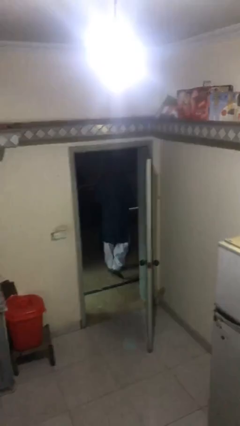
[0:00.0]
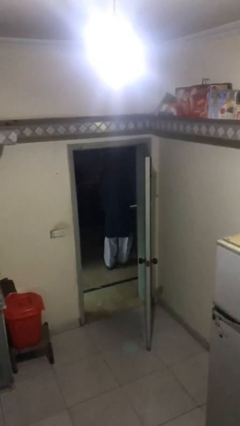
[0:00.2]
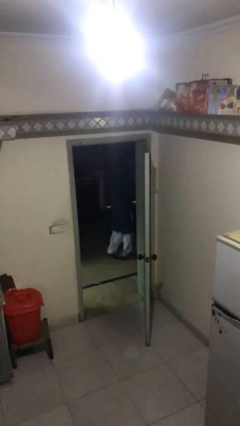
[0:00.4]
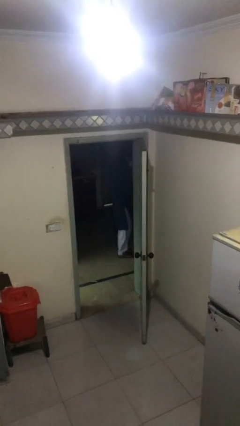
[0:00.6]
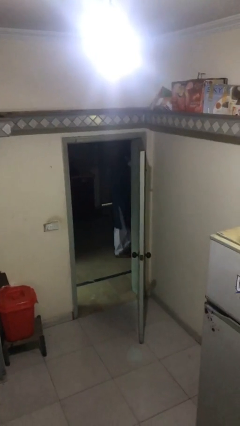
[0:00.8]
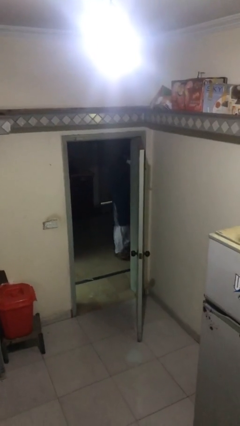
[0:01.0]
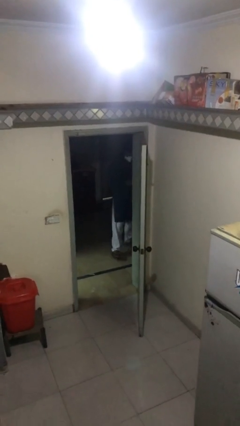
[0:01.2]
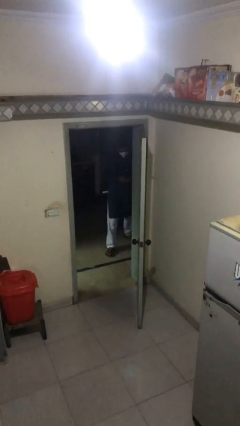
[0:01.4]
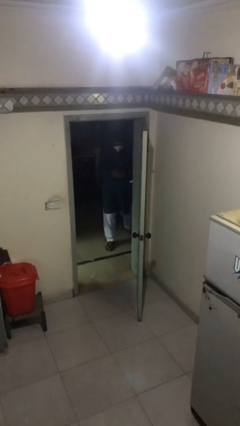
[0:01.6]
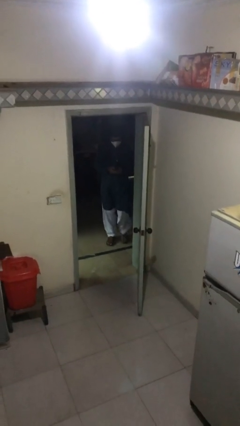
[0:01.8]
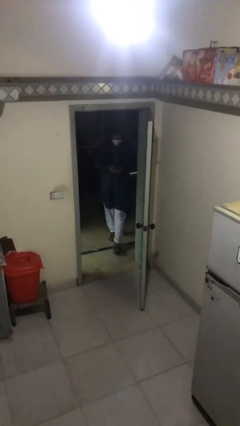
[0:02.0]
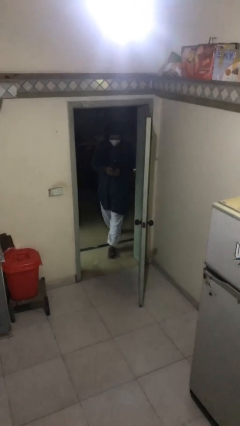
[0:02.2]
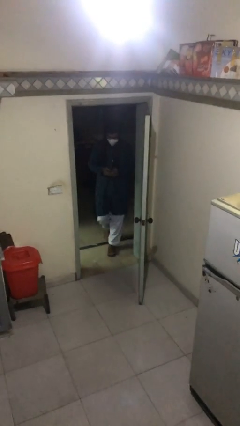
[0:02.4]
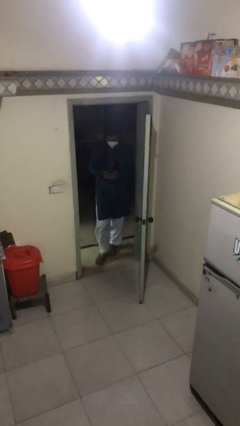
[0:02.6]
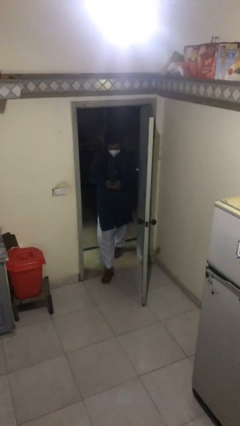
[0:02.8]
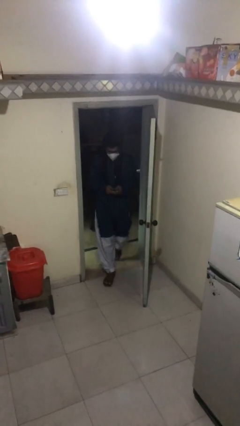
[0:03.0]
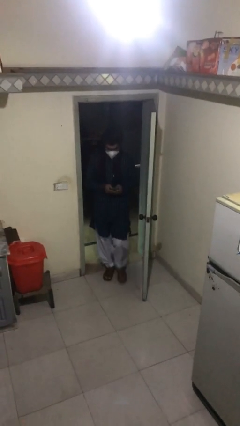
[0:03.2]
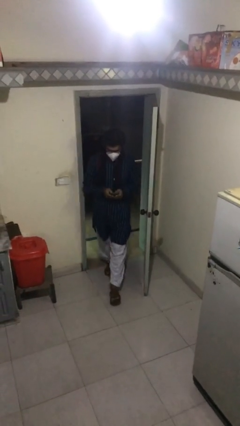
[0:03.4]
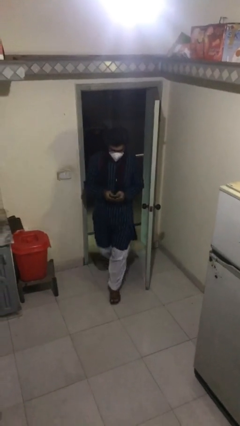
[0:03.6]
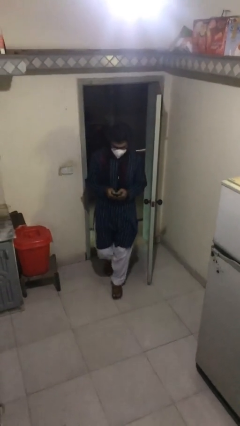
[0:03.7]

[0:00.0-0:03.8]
person enters scene through structure

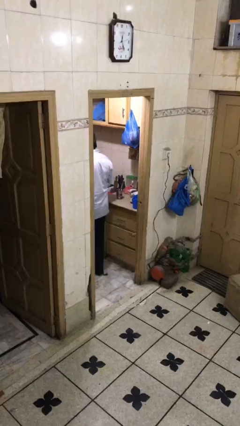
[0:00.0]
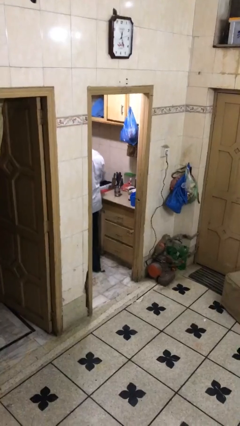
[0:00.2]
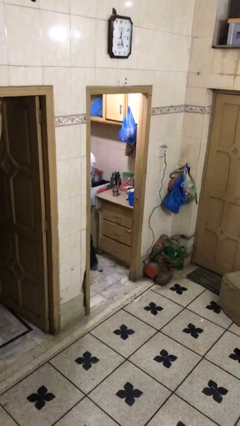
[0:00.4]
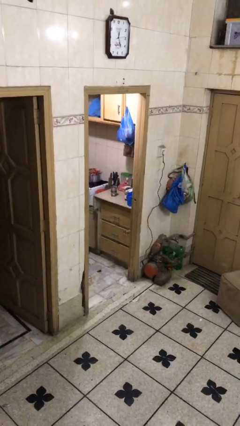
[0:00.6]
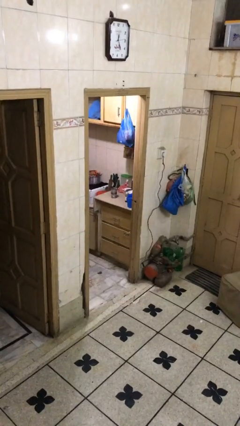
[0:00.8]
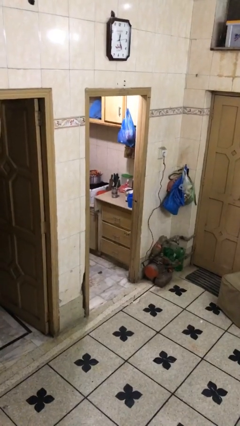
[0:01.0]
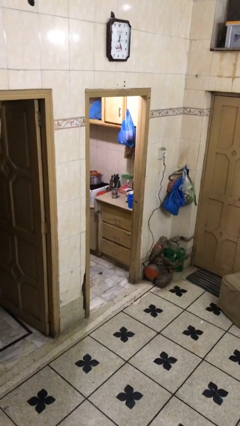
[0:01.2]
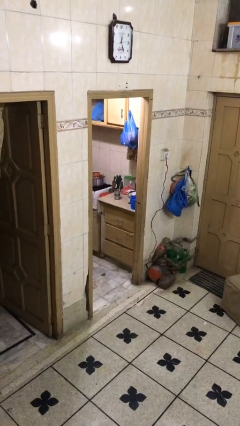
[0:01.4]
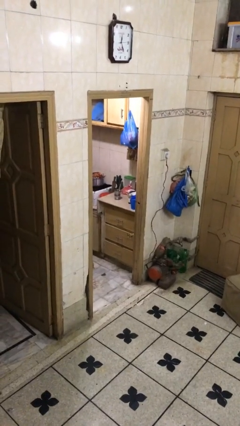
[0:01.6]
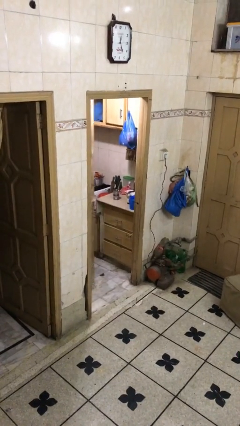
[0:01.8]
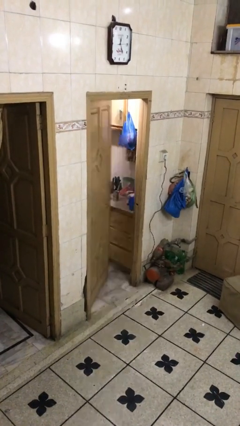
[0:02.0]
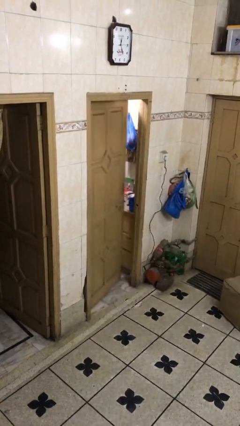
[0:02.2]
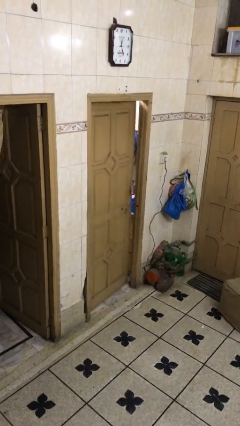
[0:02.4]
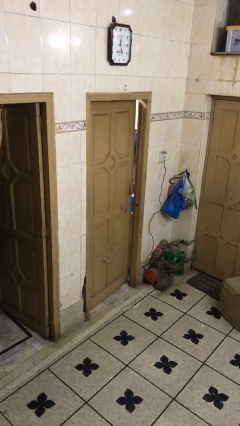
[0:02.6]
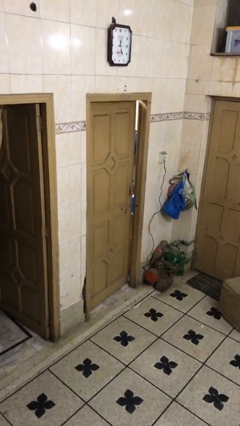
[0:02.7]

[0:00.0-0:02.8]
person closes facility door

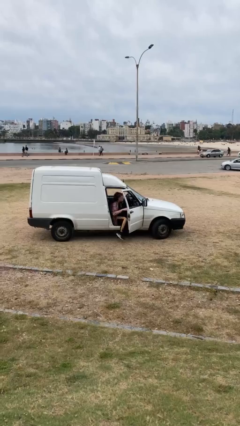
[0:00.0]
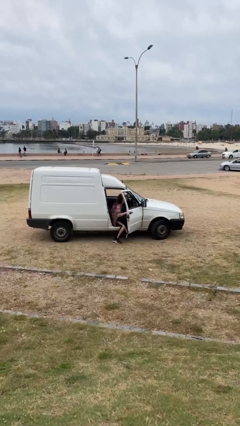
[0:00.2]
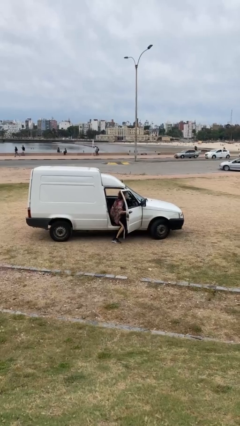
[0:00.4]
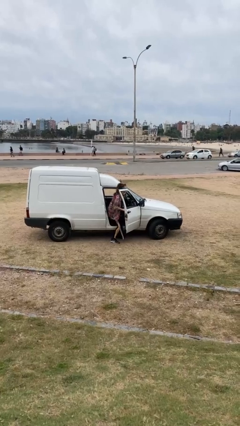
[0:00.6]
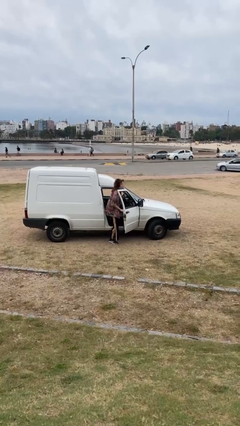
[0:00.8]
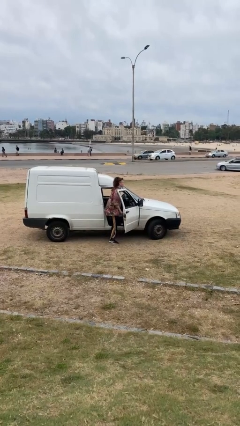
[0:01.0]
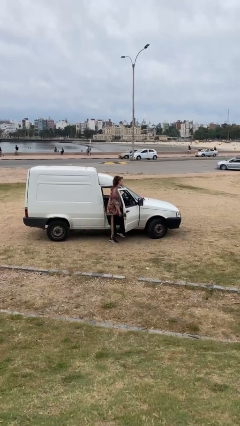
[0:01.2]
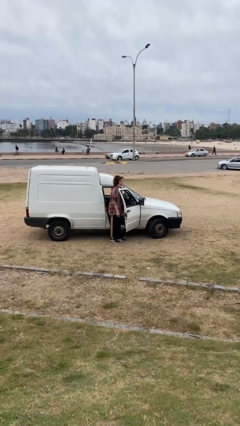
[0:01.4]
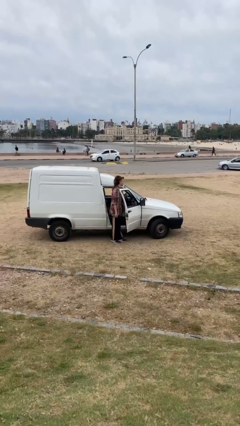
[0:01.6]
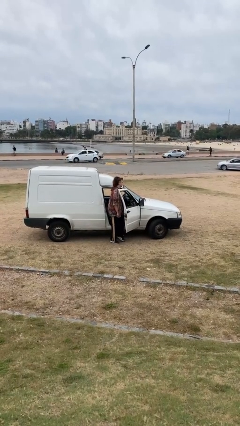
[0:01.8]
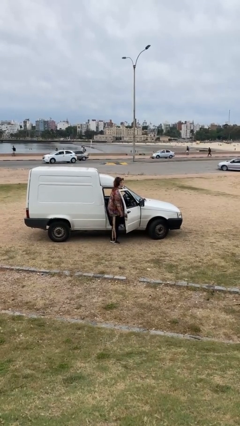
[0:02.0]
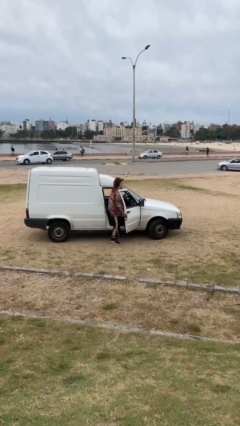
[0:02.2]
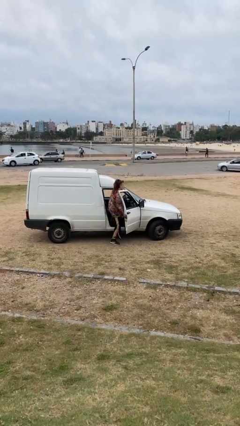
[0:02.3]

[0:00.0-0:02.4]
person exits car

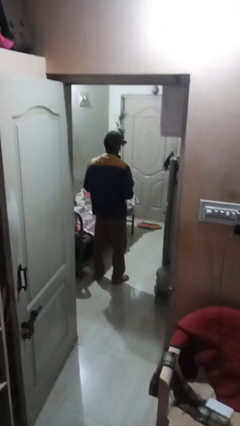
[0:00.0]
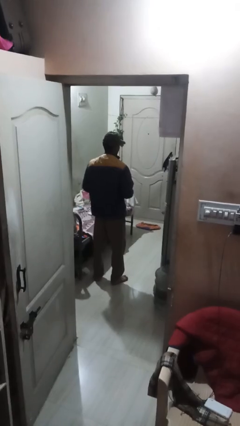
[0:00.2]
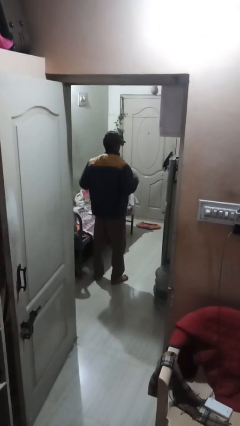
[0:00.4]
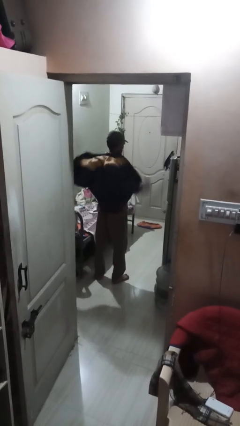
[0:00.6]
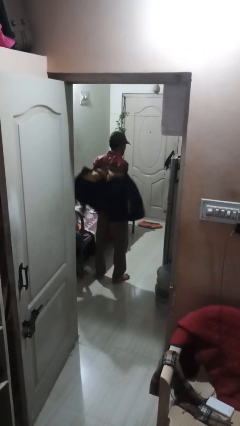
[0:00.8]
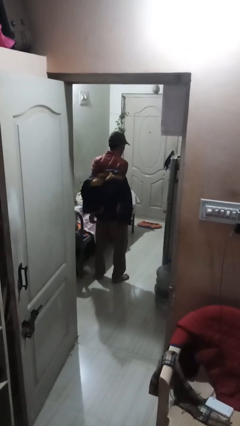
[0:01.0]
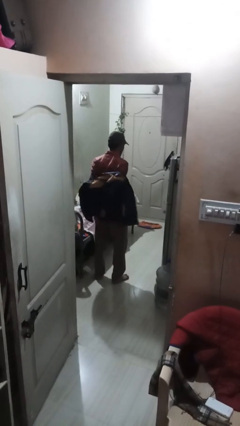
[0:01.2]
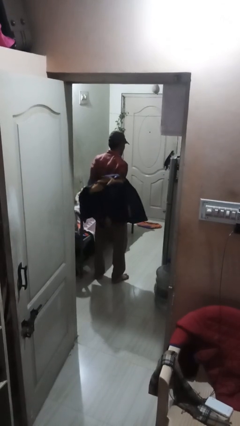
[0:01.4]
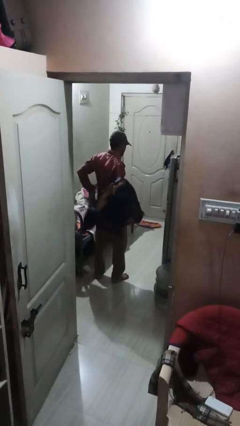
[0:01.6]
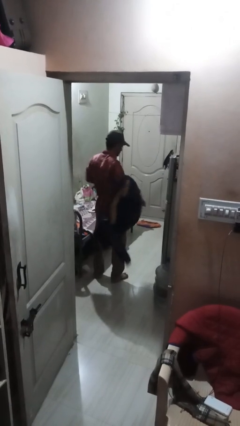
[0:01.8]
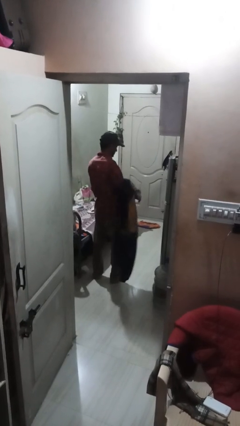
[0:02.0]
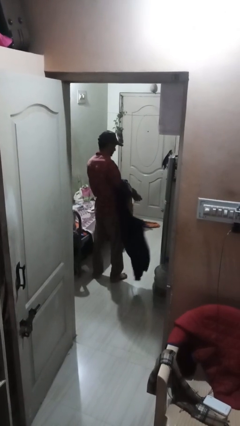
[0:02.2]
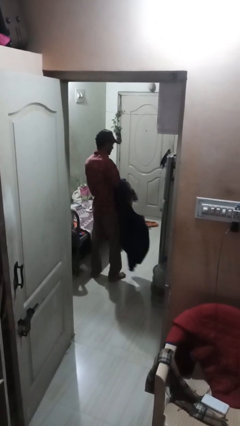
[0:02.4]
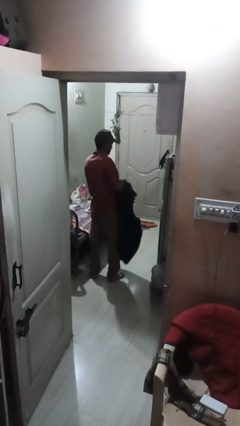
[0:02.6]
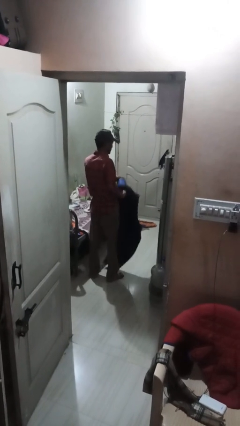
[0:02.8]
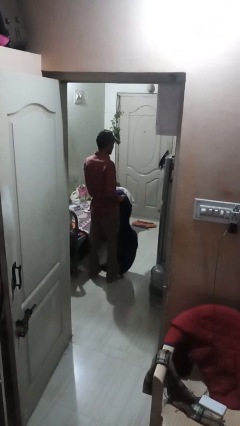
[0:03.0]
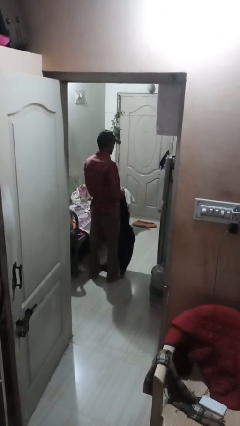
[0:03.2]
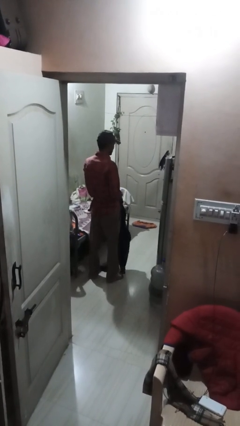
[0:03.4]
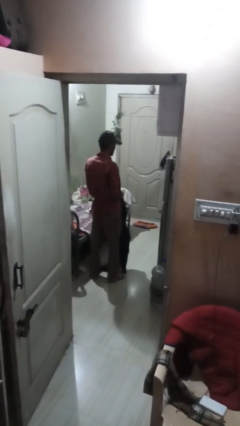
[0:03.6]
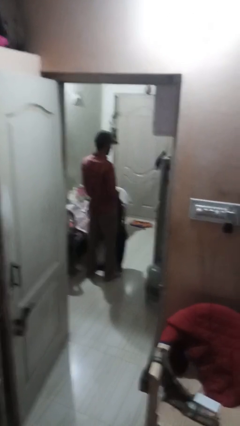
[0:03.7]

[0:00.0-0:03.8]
person takes off jacket

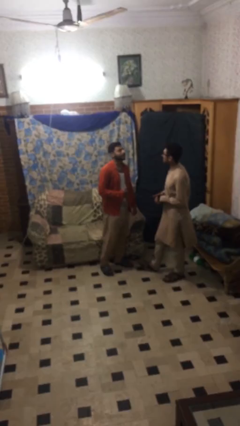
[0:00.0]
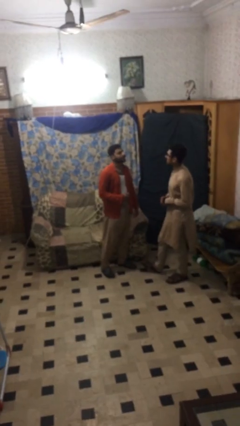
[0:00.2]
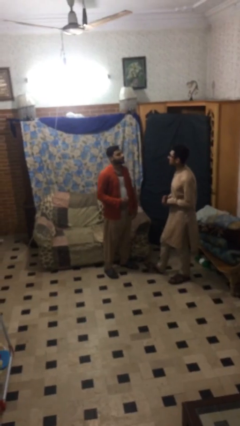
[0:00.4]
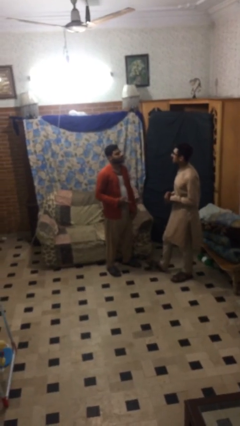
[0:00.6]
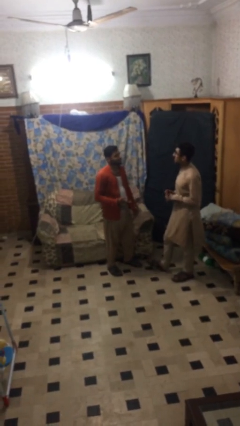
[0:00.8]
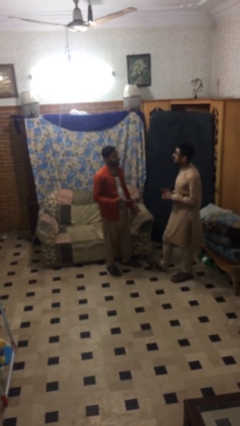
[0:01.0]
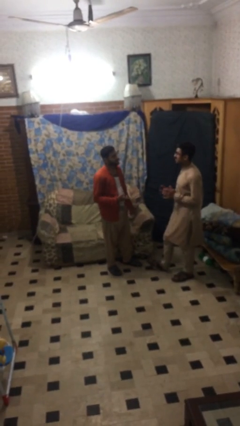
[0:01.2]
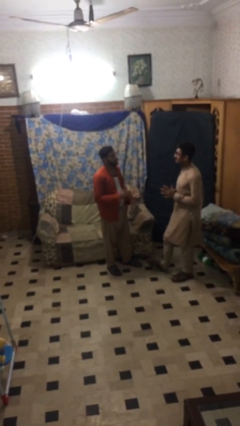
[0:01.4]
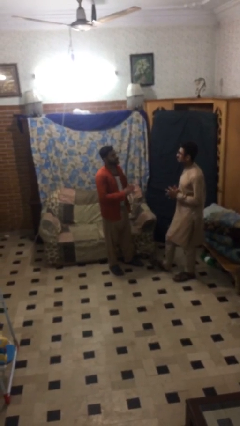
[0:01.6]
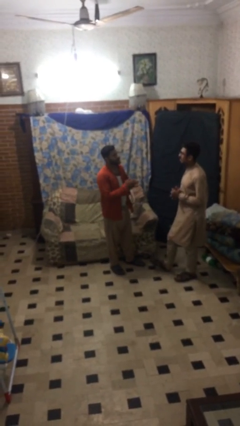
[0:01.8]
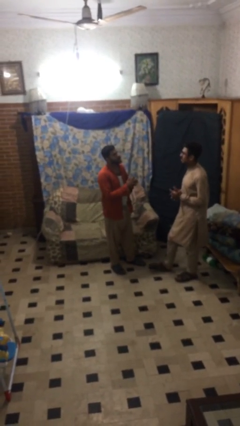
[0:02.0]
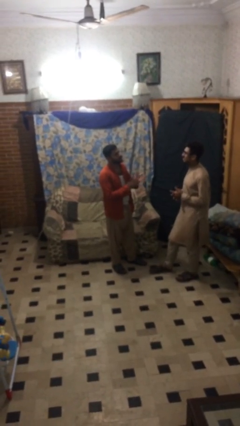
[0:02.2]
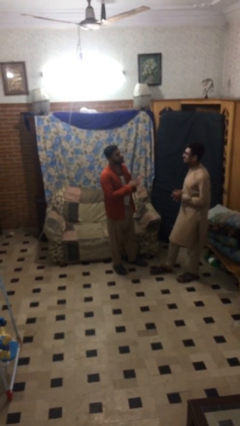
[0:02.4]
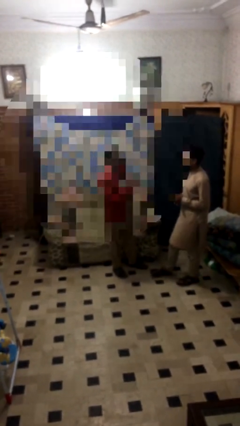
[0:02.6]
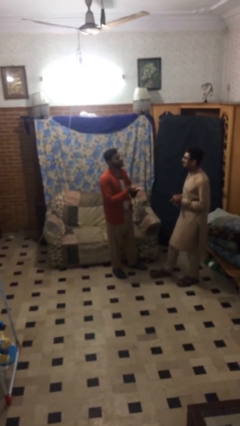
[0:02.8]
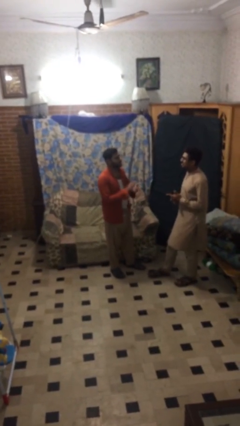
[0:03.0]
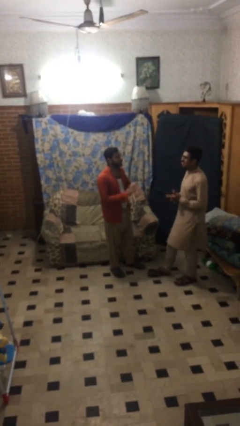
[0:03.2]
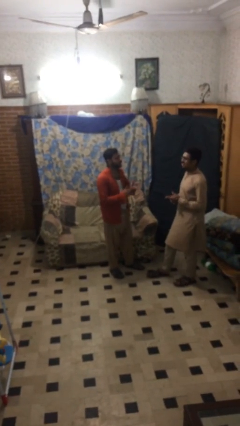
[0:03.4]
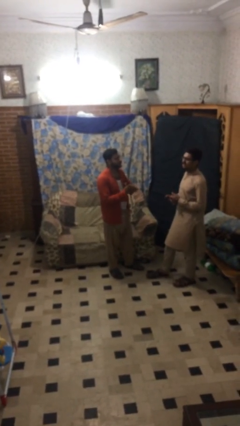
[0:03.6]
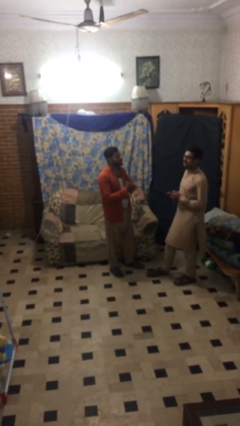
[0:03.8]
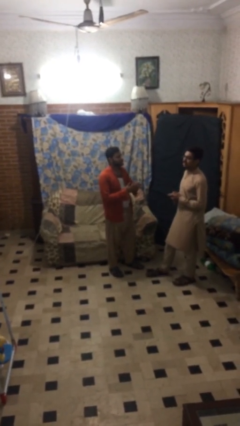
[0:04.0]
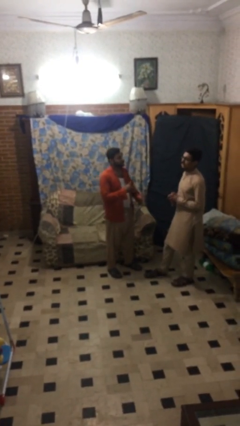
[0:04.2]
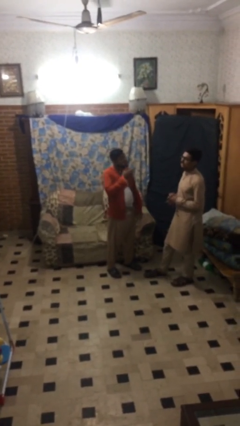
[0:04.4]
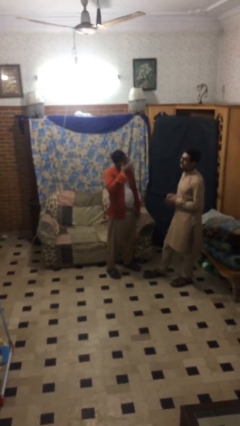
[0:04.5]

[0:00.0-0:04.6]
person talks to person
